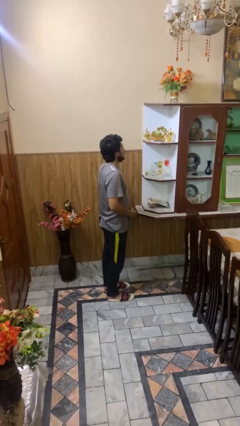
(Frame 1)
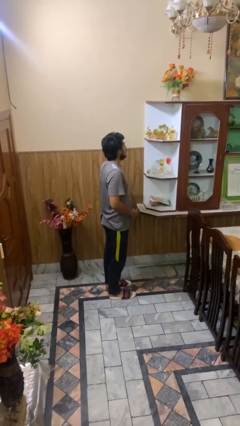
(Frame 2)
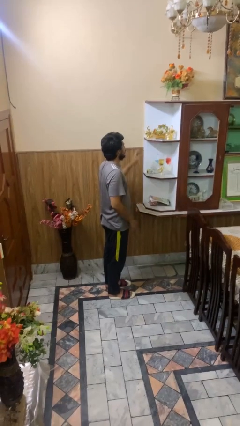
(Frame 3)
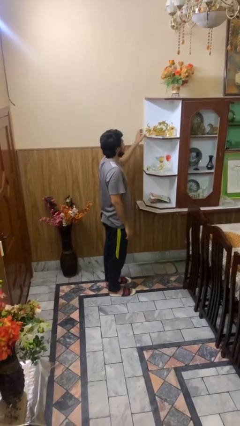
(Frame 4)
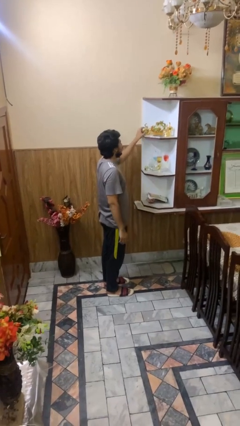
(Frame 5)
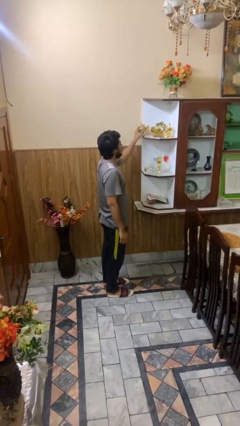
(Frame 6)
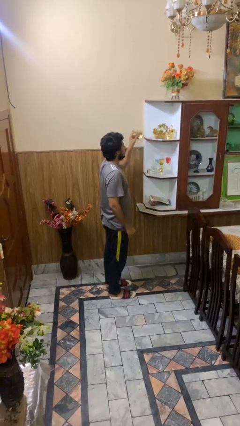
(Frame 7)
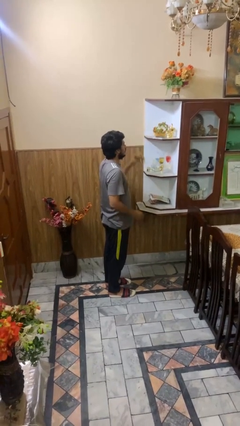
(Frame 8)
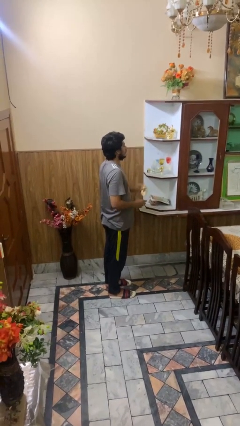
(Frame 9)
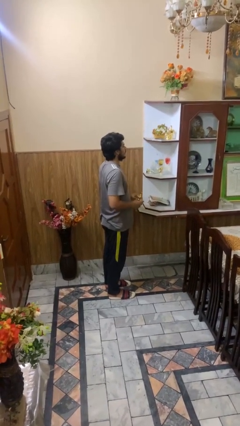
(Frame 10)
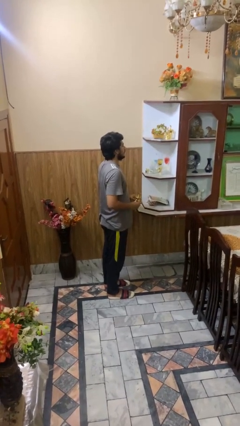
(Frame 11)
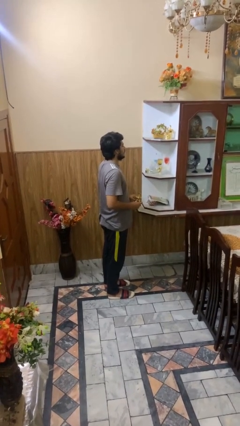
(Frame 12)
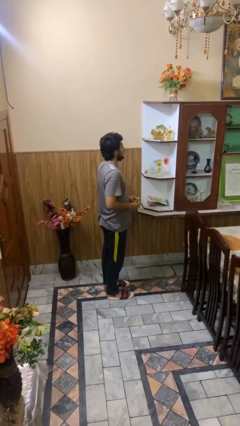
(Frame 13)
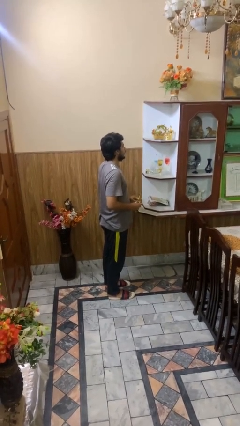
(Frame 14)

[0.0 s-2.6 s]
person picks up object from shelf

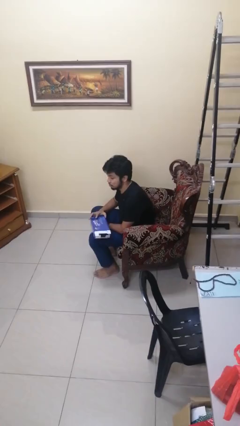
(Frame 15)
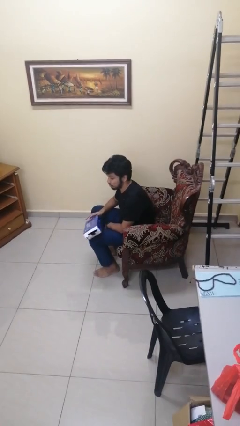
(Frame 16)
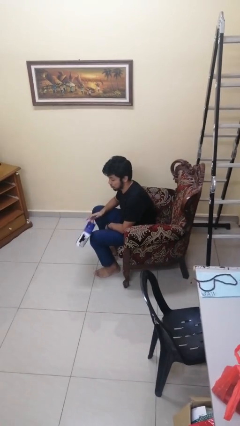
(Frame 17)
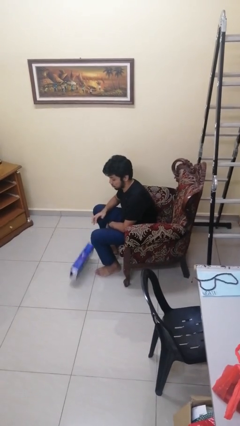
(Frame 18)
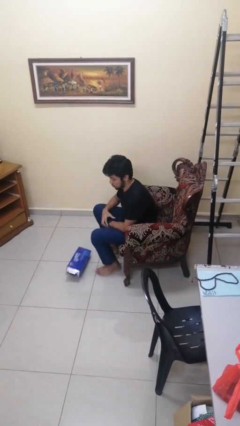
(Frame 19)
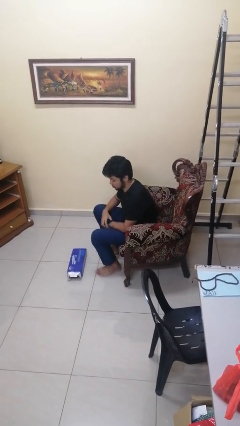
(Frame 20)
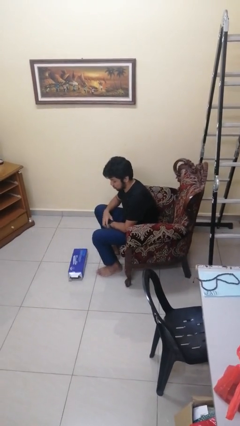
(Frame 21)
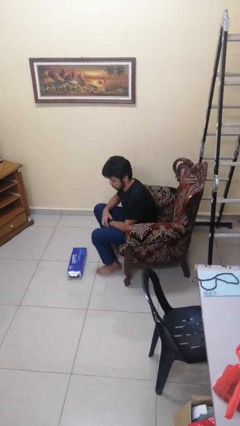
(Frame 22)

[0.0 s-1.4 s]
person drops object

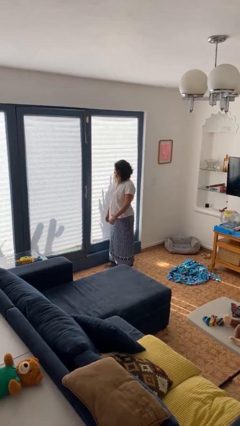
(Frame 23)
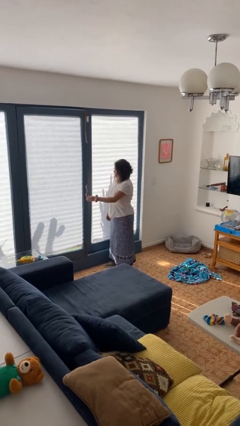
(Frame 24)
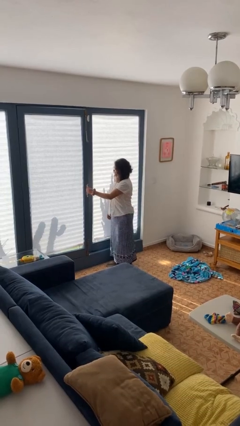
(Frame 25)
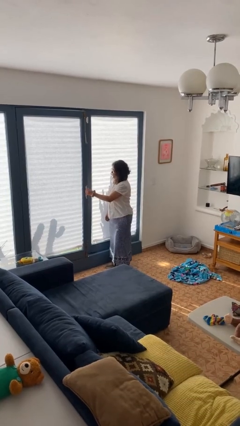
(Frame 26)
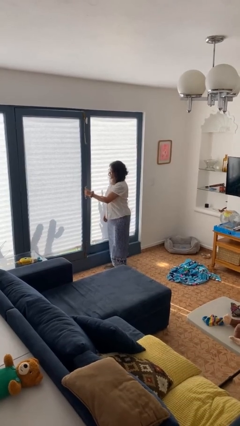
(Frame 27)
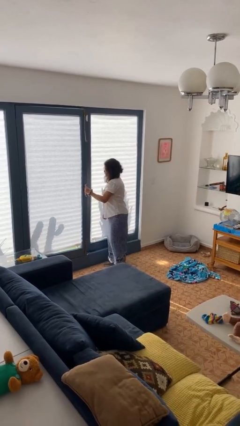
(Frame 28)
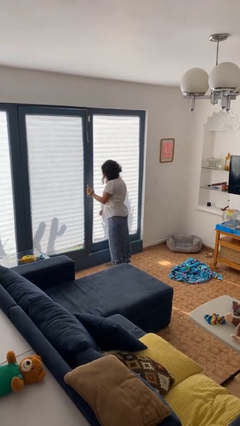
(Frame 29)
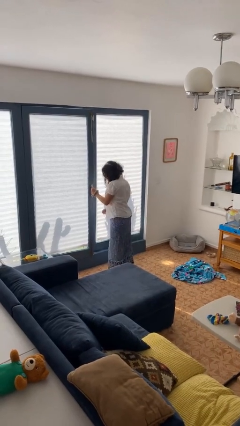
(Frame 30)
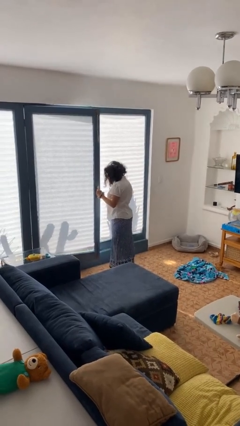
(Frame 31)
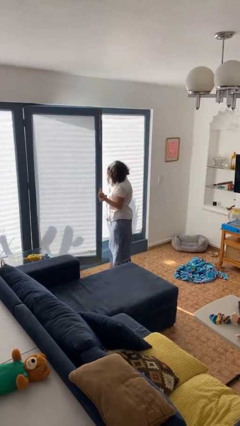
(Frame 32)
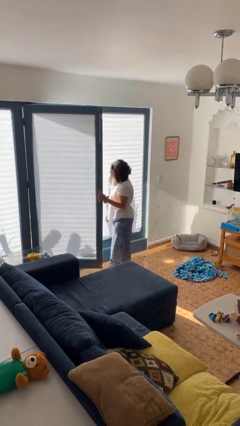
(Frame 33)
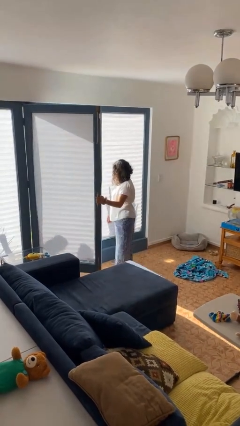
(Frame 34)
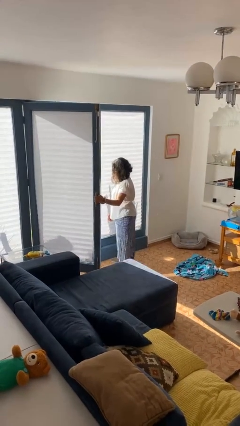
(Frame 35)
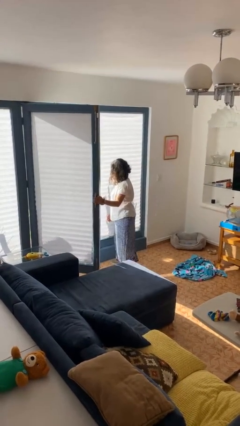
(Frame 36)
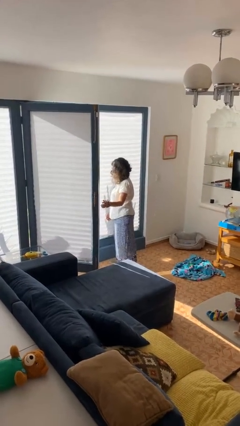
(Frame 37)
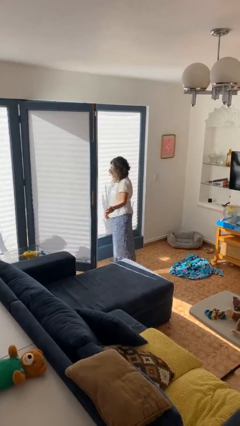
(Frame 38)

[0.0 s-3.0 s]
person opens home window

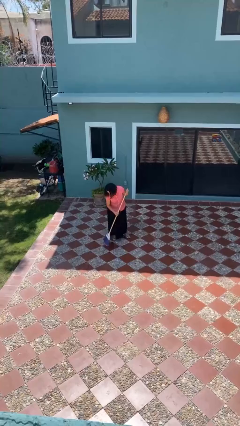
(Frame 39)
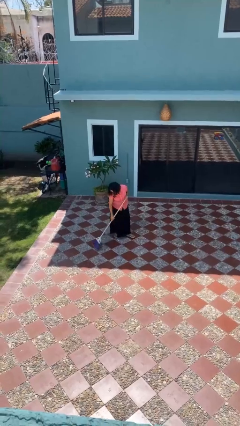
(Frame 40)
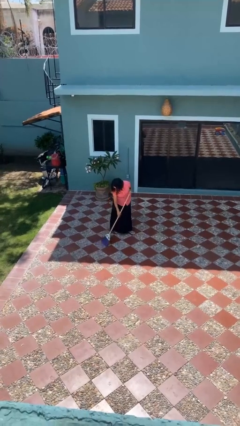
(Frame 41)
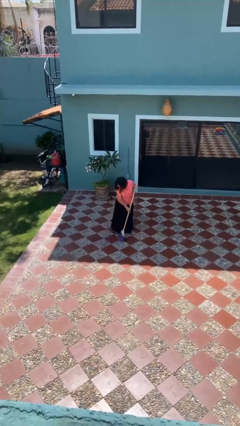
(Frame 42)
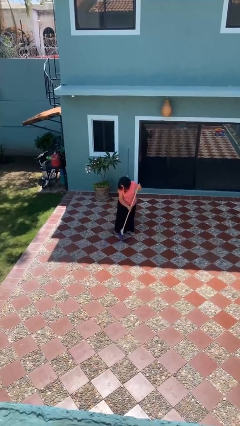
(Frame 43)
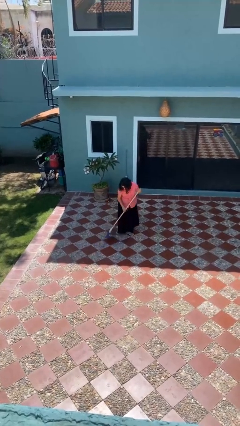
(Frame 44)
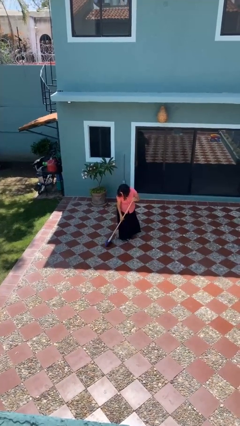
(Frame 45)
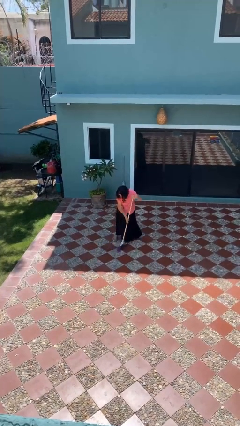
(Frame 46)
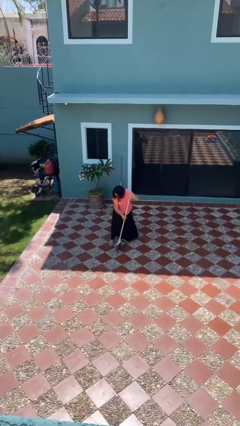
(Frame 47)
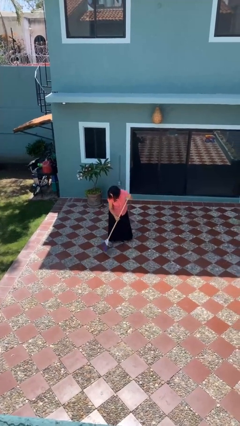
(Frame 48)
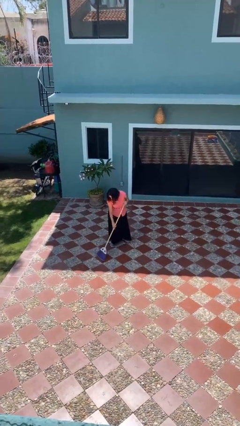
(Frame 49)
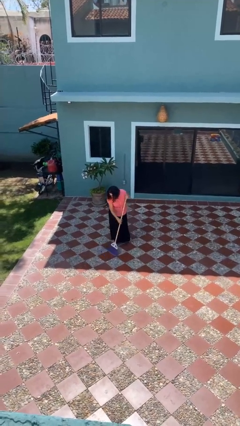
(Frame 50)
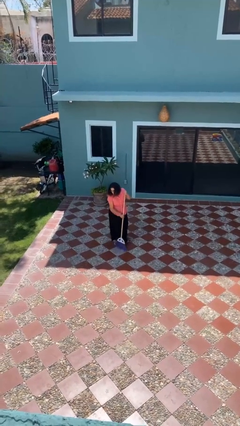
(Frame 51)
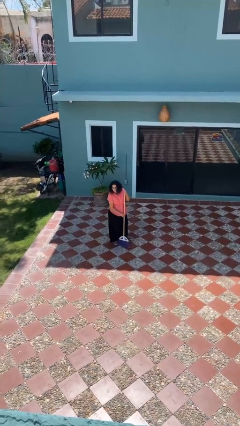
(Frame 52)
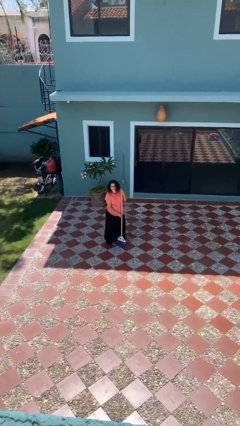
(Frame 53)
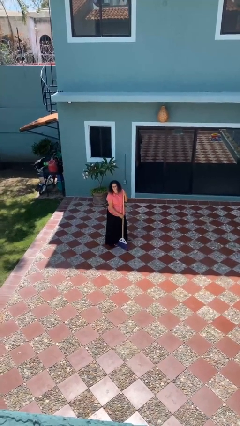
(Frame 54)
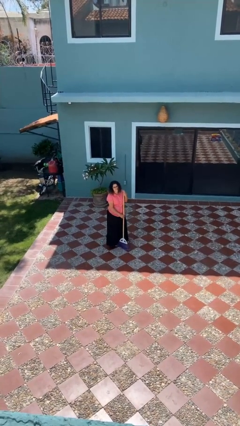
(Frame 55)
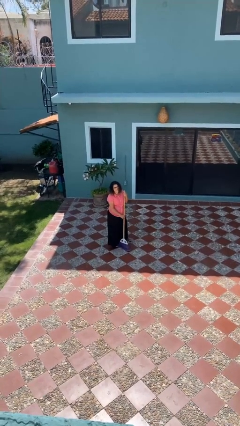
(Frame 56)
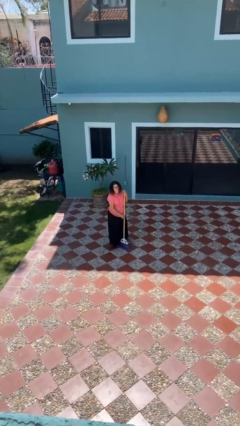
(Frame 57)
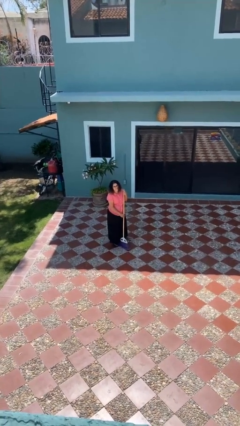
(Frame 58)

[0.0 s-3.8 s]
person sweeps floor

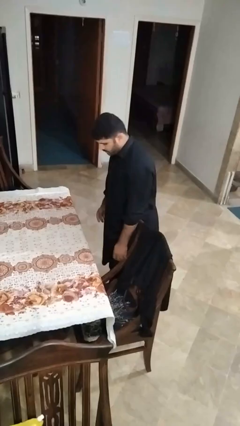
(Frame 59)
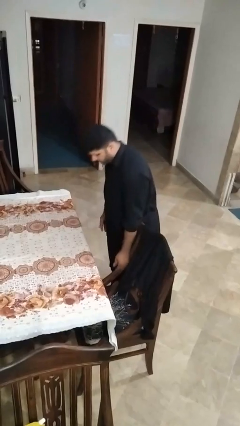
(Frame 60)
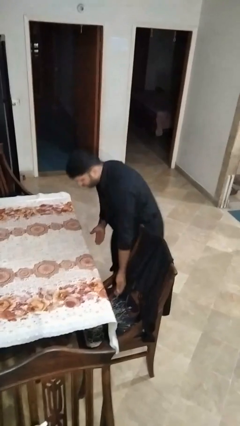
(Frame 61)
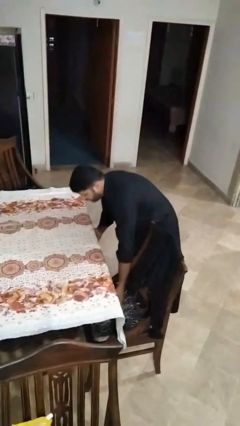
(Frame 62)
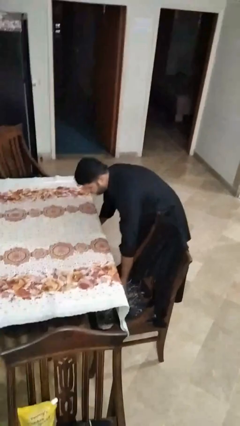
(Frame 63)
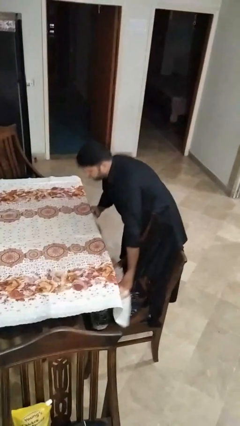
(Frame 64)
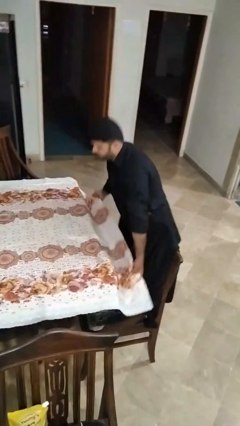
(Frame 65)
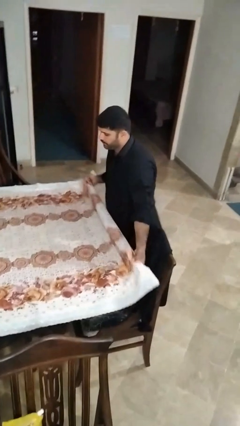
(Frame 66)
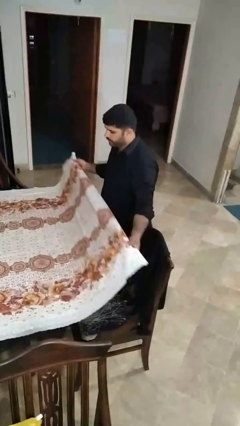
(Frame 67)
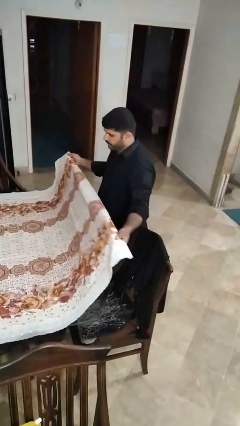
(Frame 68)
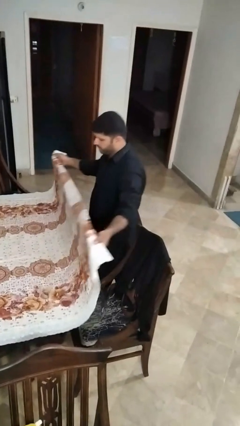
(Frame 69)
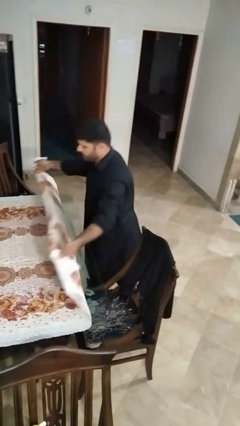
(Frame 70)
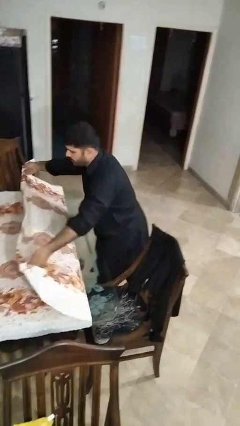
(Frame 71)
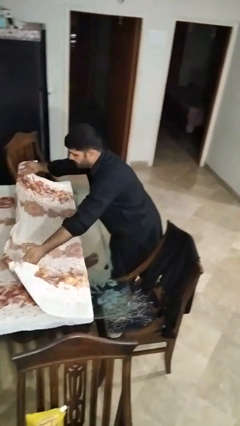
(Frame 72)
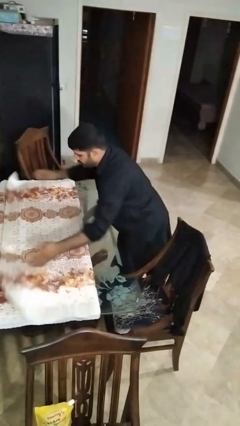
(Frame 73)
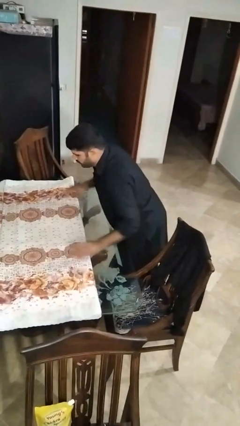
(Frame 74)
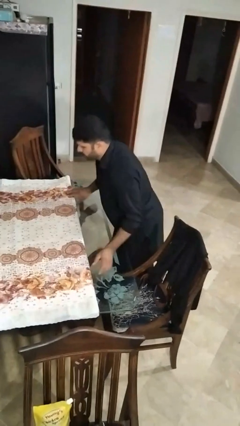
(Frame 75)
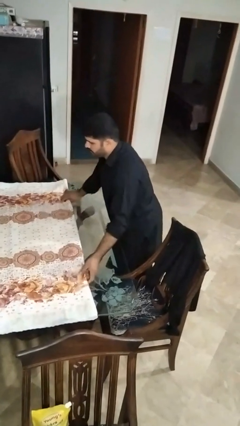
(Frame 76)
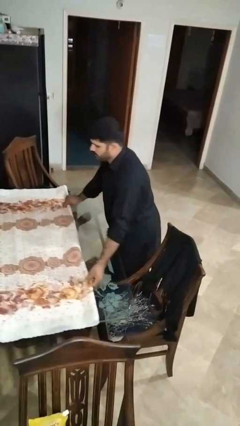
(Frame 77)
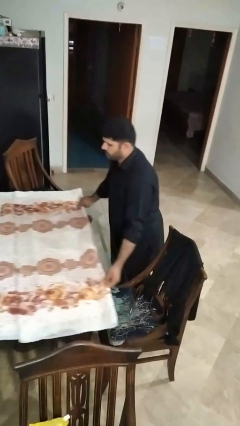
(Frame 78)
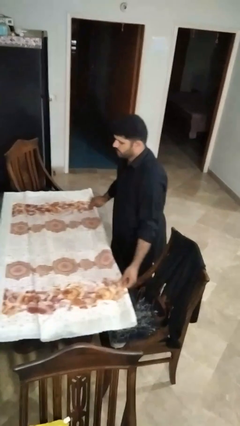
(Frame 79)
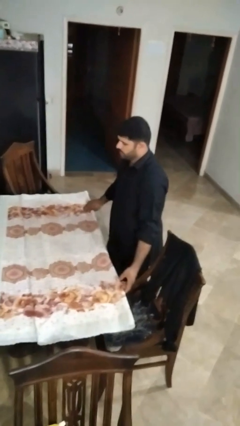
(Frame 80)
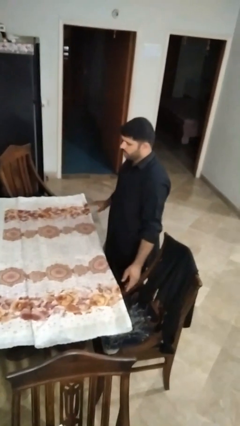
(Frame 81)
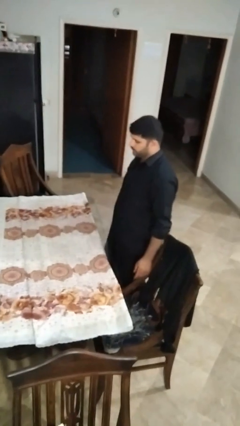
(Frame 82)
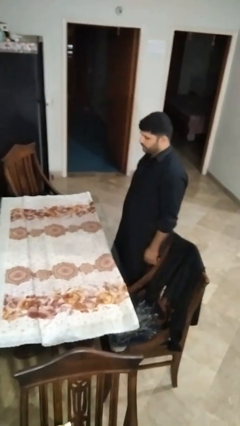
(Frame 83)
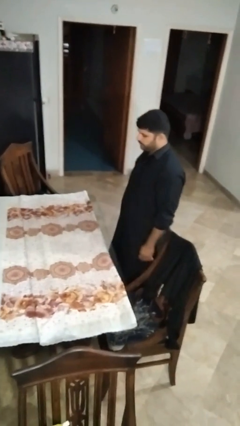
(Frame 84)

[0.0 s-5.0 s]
person folds tablecloth

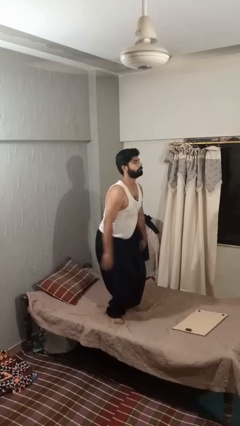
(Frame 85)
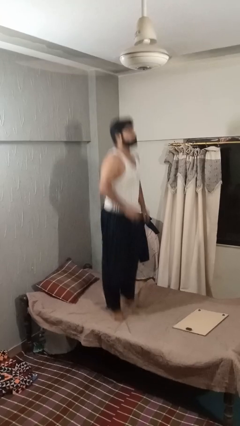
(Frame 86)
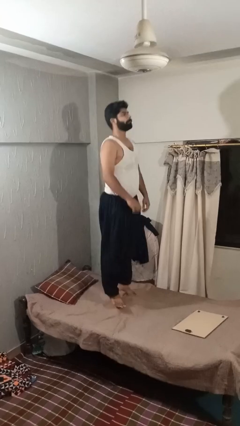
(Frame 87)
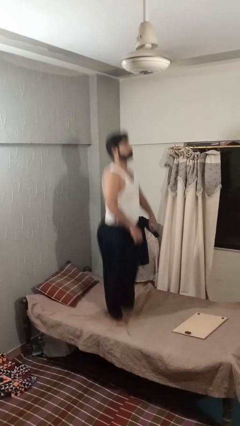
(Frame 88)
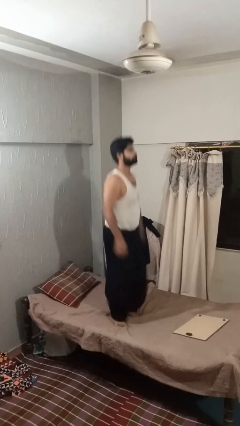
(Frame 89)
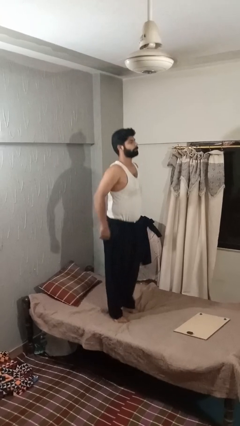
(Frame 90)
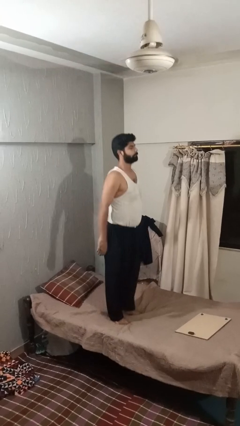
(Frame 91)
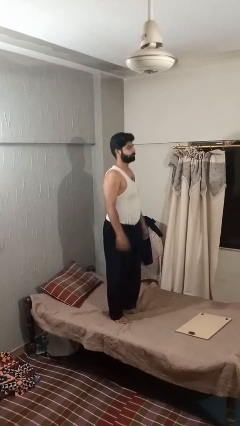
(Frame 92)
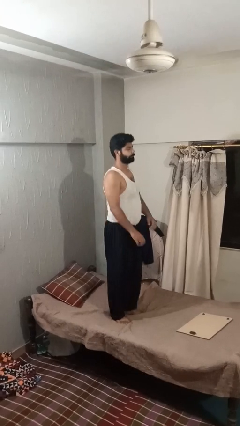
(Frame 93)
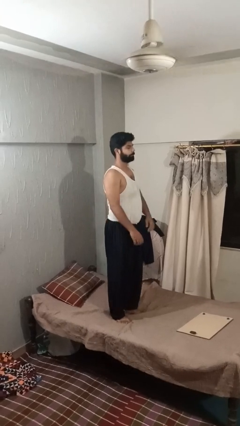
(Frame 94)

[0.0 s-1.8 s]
person jumps on bed
